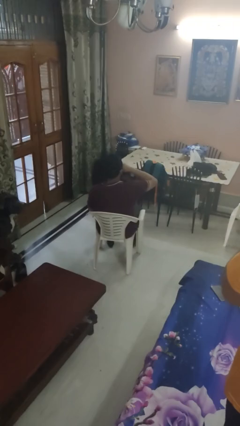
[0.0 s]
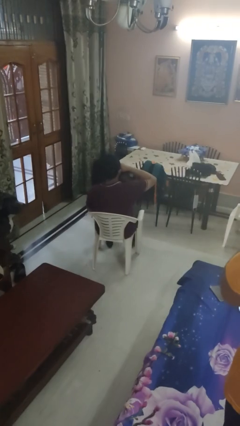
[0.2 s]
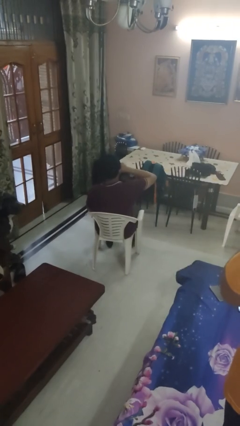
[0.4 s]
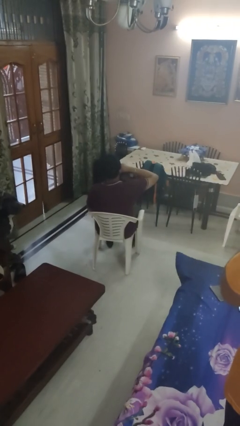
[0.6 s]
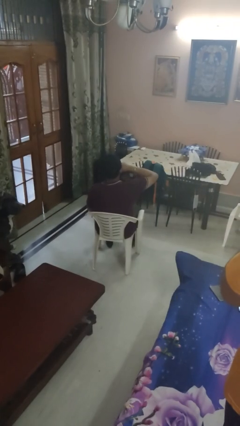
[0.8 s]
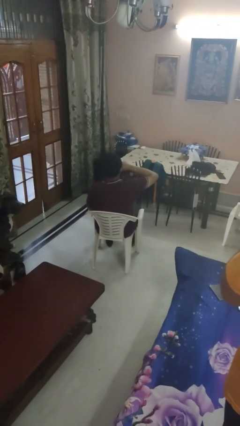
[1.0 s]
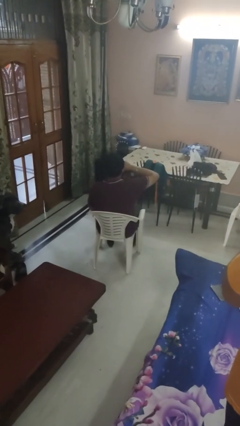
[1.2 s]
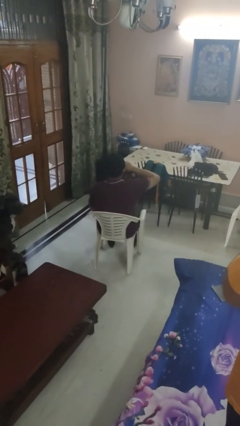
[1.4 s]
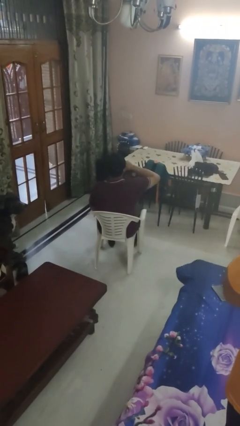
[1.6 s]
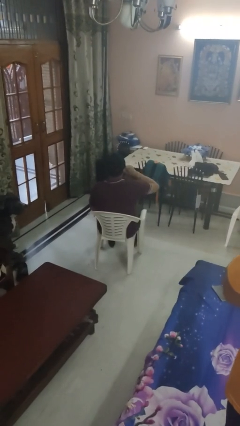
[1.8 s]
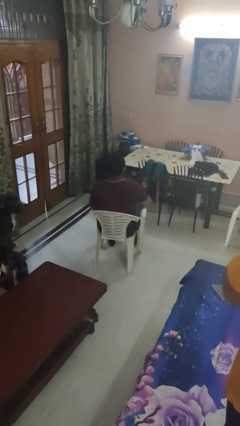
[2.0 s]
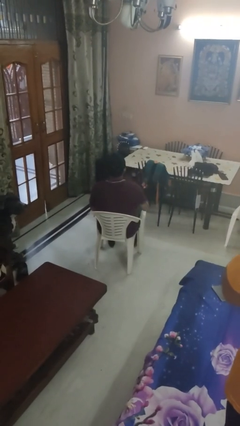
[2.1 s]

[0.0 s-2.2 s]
person rubs eyes

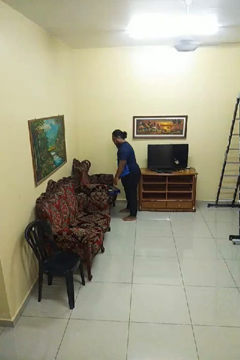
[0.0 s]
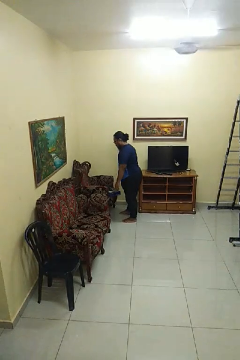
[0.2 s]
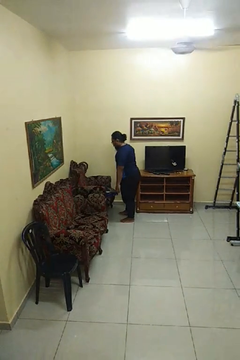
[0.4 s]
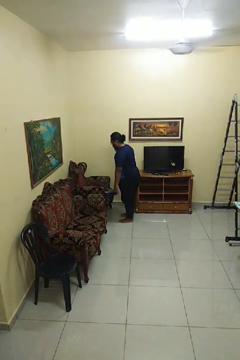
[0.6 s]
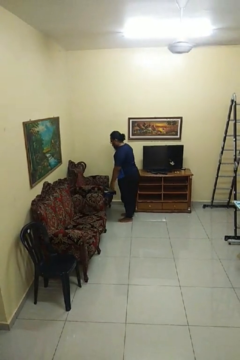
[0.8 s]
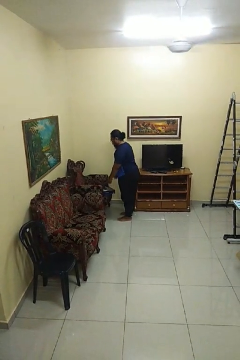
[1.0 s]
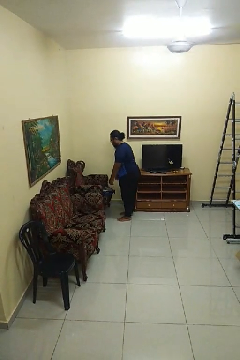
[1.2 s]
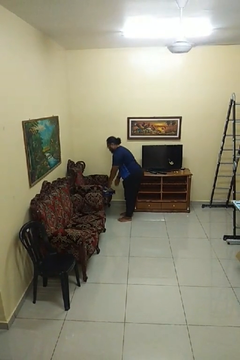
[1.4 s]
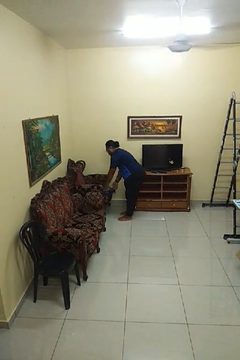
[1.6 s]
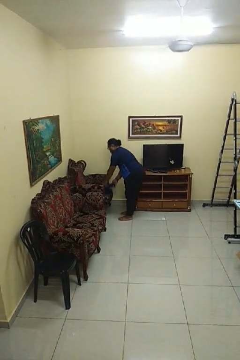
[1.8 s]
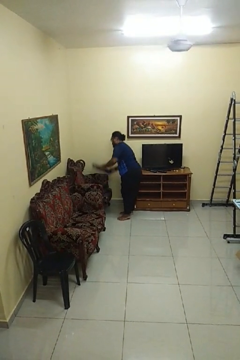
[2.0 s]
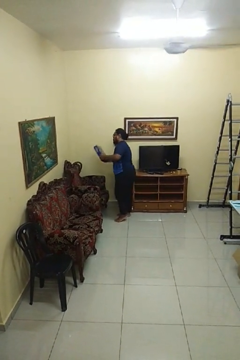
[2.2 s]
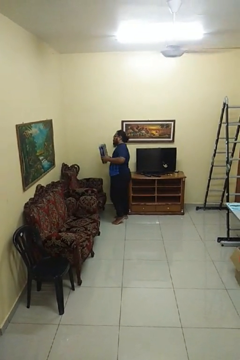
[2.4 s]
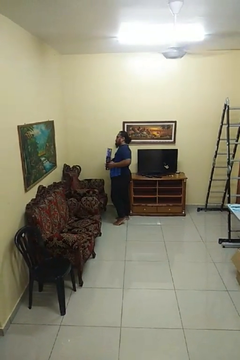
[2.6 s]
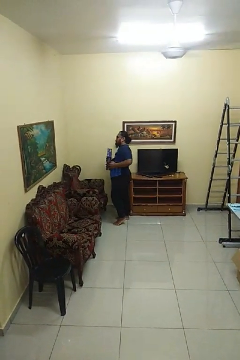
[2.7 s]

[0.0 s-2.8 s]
person picks up object from couch

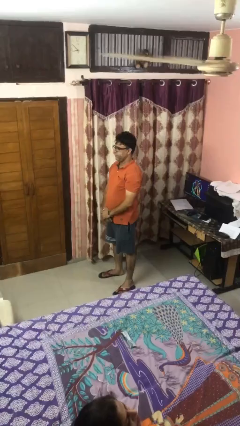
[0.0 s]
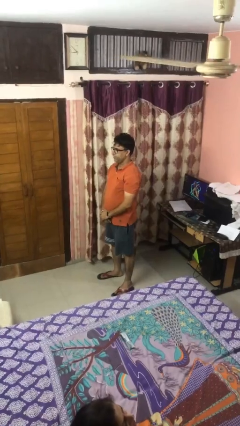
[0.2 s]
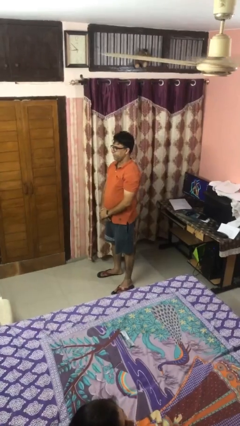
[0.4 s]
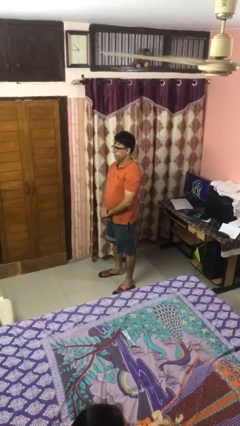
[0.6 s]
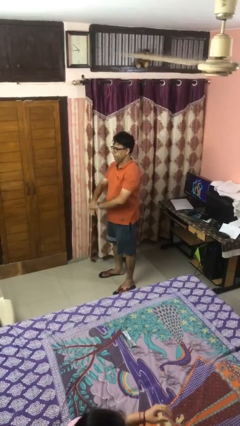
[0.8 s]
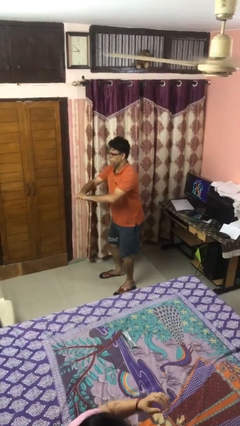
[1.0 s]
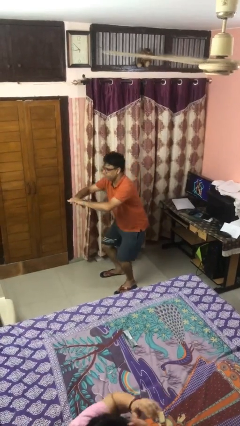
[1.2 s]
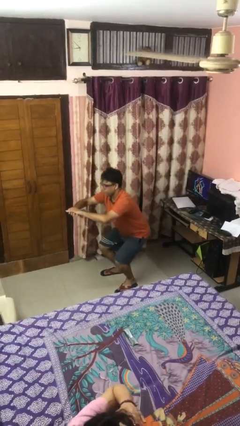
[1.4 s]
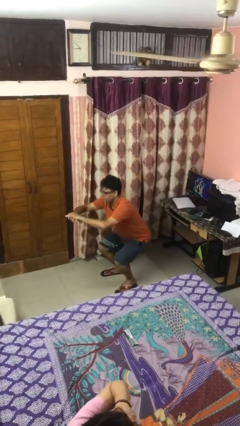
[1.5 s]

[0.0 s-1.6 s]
person squats

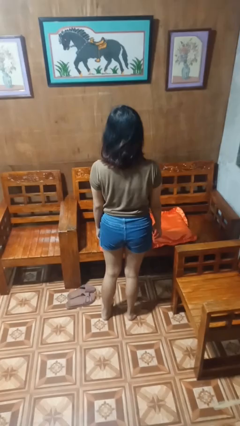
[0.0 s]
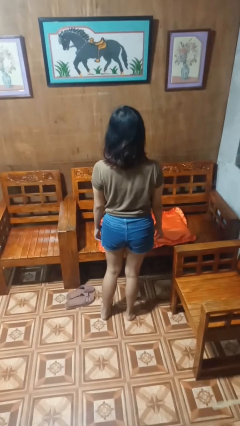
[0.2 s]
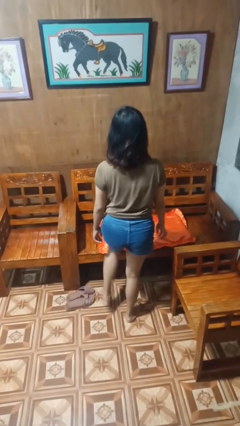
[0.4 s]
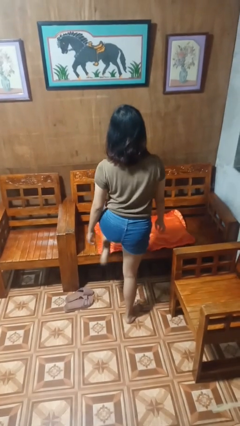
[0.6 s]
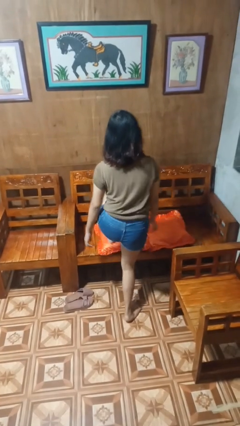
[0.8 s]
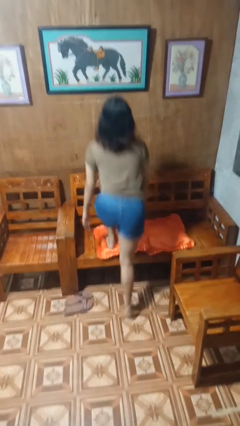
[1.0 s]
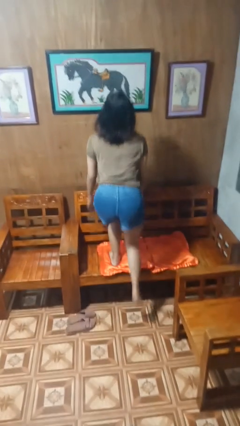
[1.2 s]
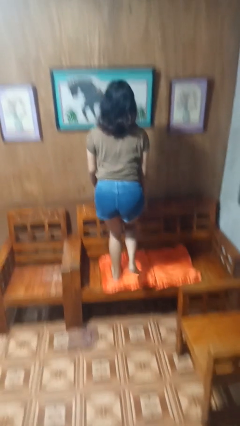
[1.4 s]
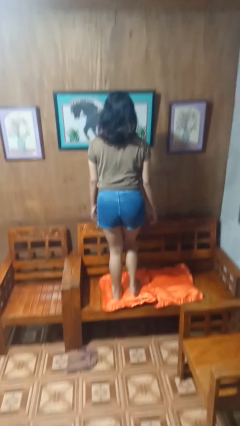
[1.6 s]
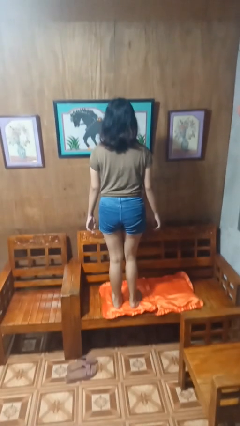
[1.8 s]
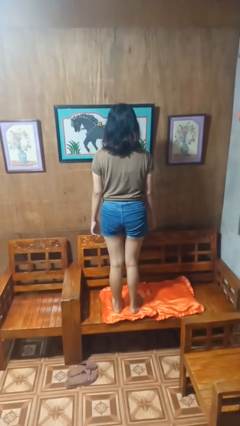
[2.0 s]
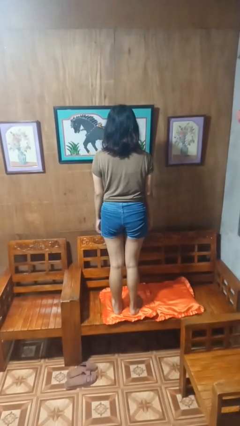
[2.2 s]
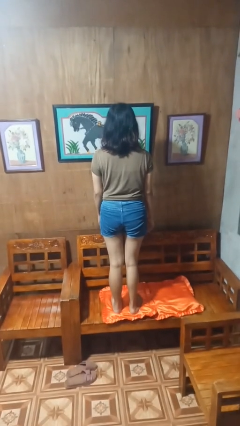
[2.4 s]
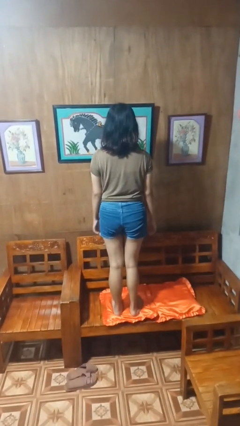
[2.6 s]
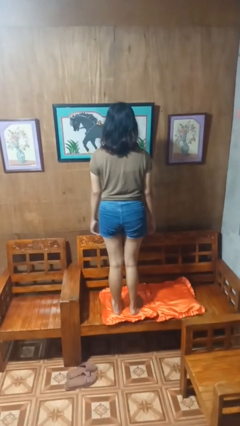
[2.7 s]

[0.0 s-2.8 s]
person climbs on couch

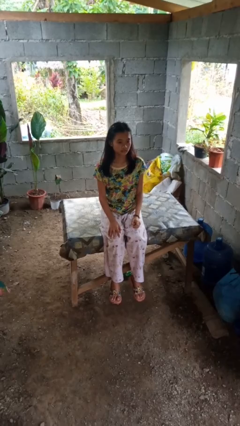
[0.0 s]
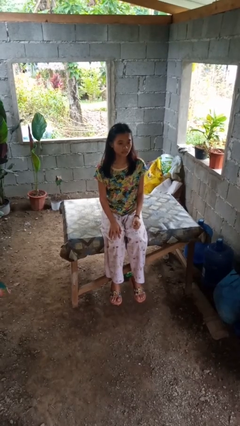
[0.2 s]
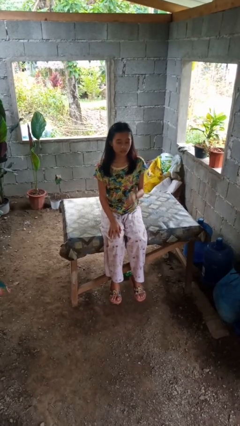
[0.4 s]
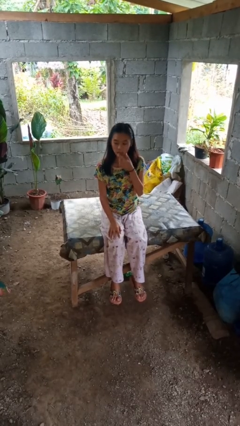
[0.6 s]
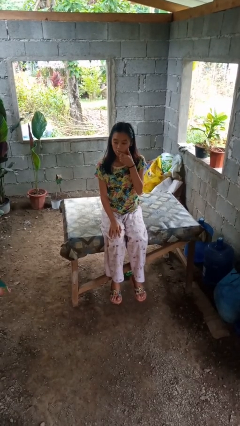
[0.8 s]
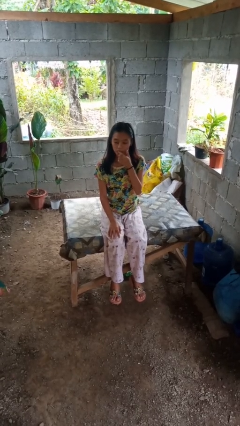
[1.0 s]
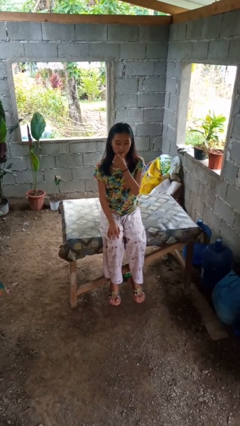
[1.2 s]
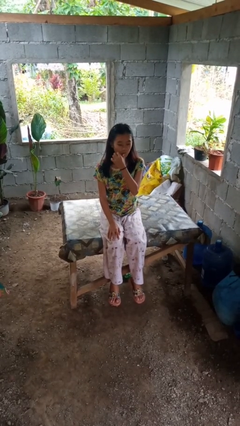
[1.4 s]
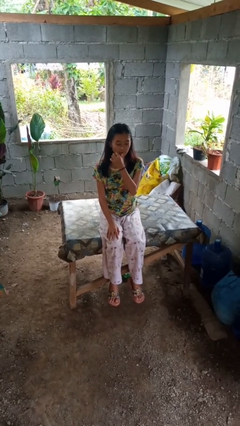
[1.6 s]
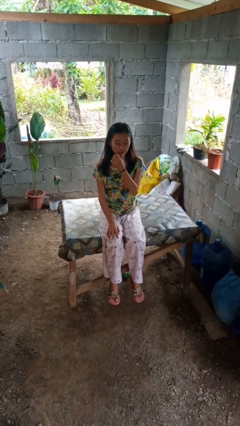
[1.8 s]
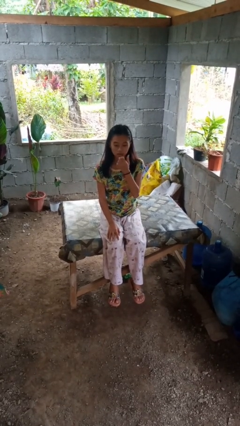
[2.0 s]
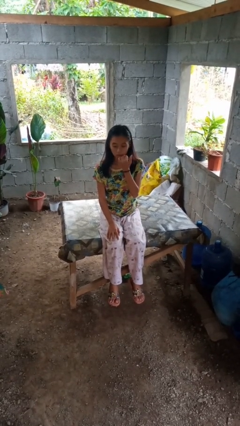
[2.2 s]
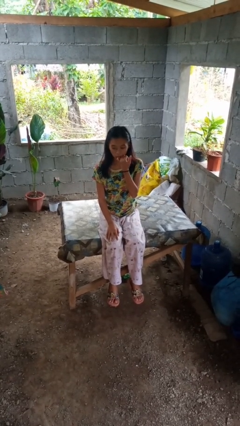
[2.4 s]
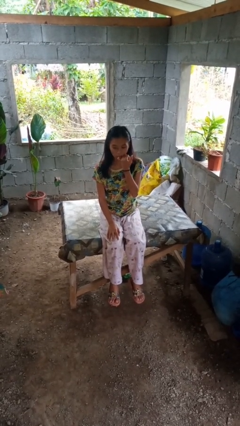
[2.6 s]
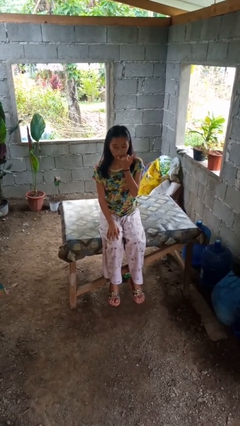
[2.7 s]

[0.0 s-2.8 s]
person licks fingers

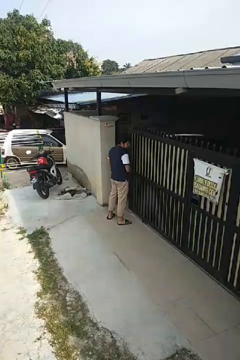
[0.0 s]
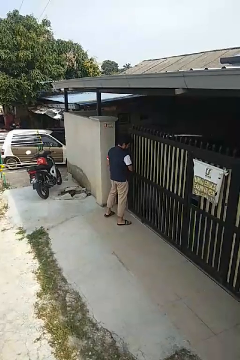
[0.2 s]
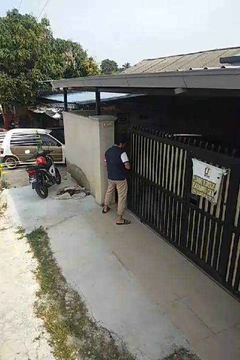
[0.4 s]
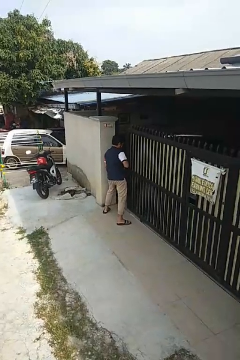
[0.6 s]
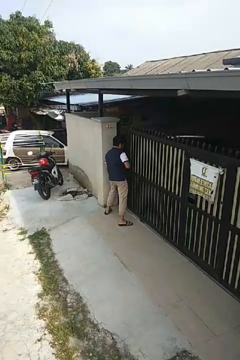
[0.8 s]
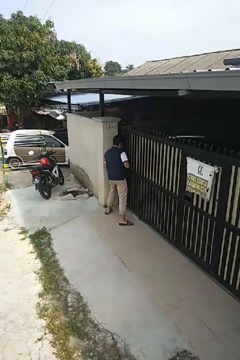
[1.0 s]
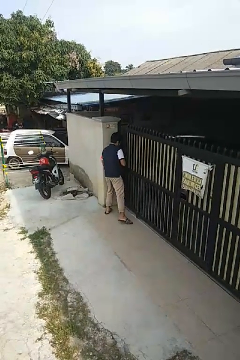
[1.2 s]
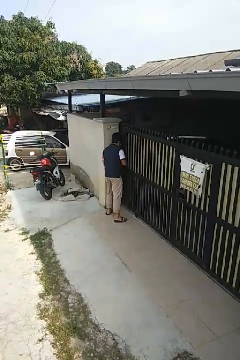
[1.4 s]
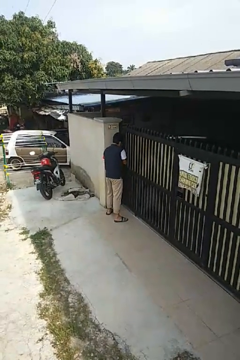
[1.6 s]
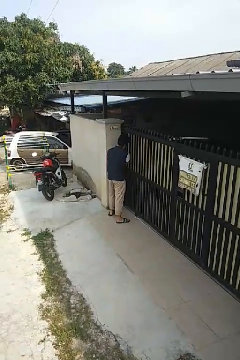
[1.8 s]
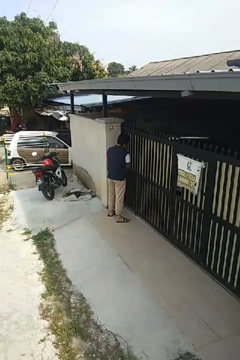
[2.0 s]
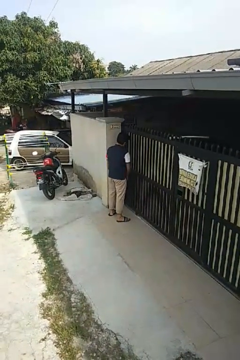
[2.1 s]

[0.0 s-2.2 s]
person closes sliding door

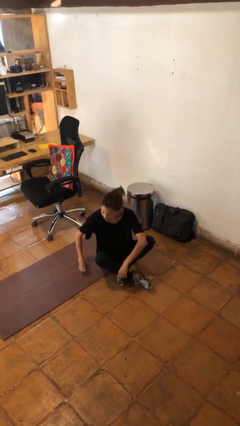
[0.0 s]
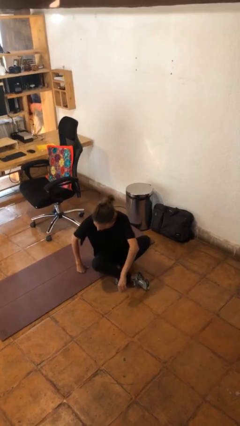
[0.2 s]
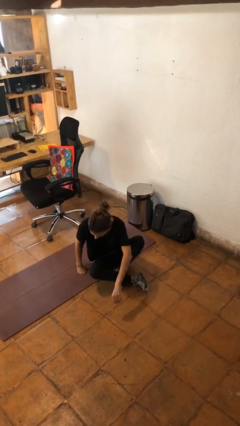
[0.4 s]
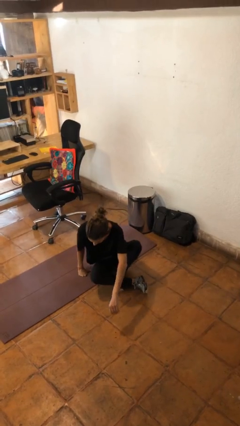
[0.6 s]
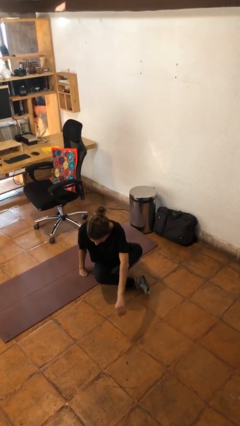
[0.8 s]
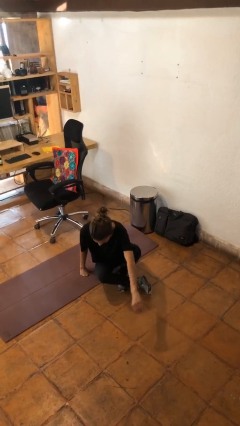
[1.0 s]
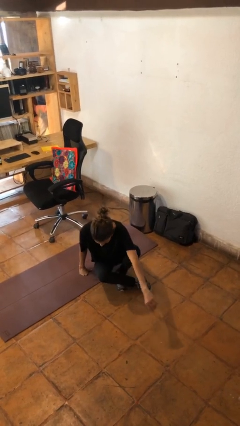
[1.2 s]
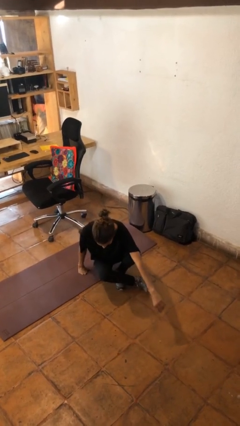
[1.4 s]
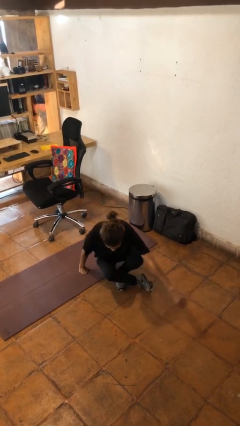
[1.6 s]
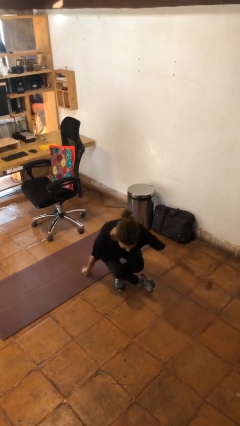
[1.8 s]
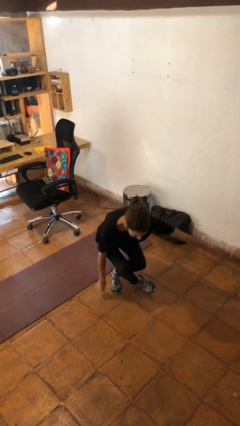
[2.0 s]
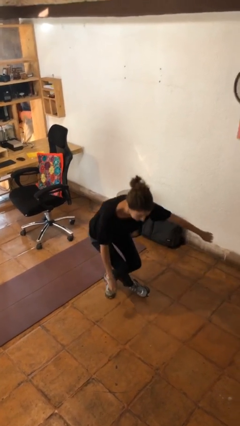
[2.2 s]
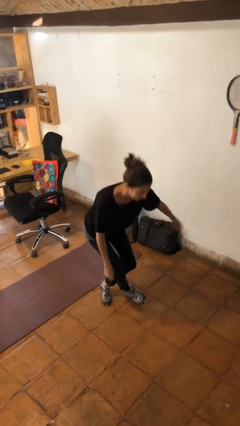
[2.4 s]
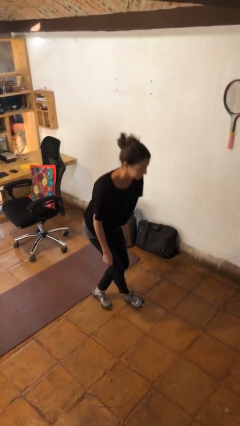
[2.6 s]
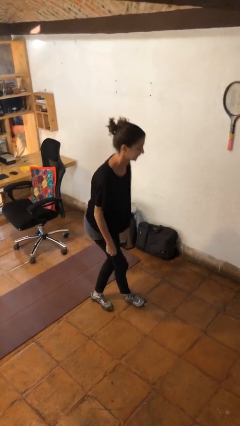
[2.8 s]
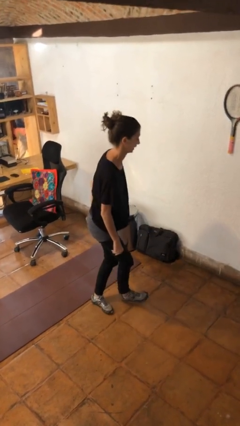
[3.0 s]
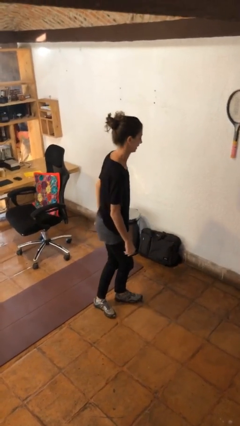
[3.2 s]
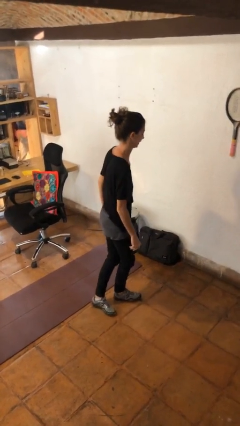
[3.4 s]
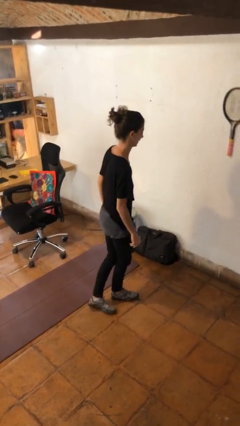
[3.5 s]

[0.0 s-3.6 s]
person stands up from floor
